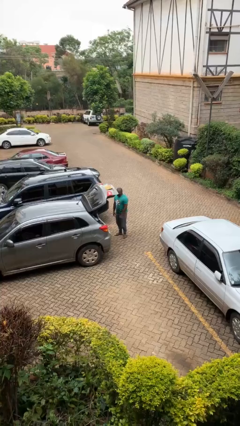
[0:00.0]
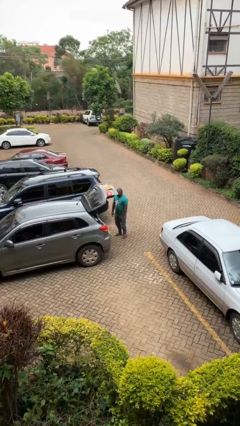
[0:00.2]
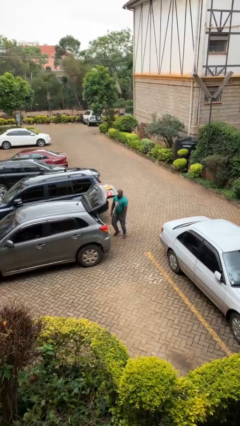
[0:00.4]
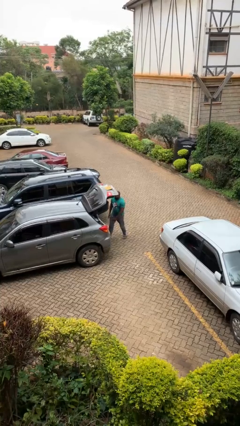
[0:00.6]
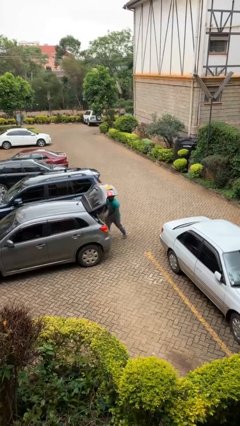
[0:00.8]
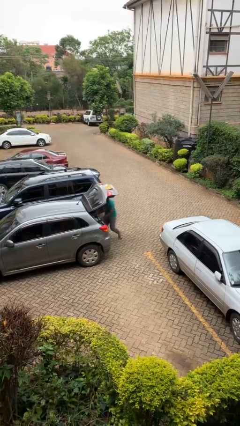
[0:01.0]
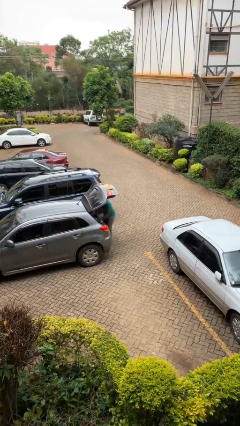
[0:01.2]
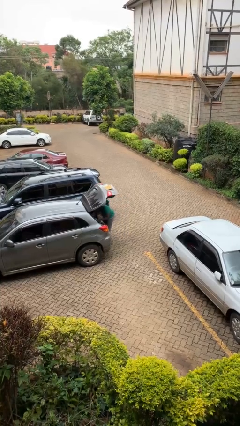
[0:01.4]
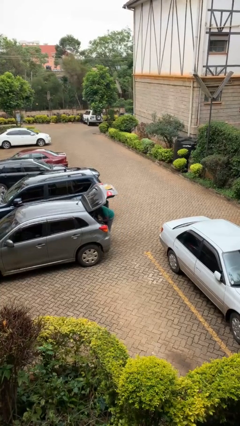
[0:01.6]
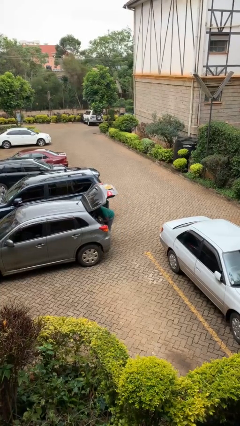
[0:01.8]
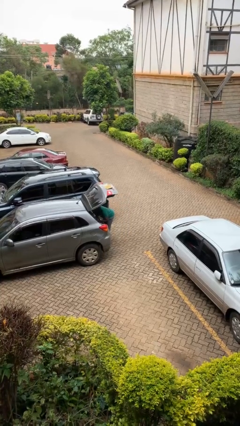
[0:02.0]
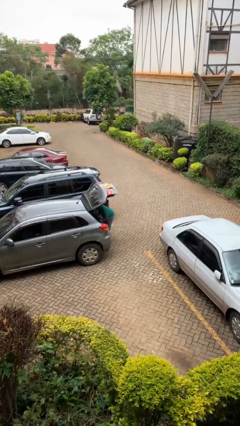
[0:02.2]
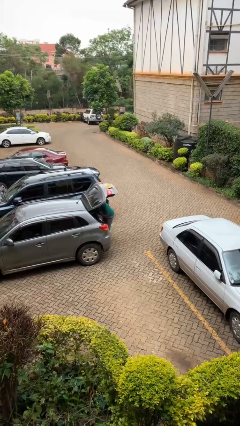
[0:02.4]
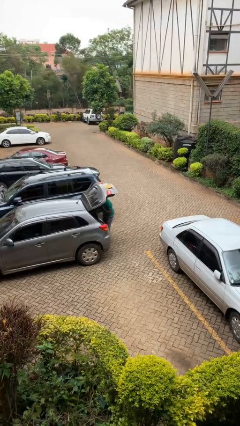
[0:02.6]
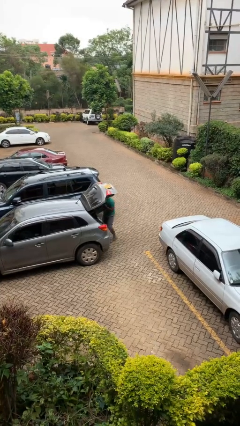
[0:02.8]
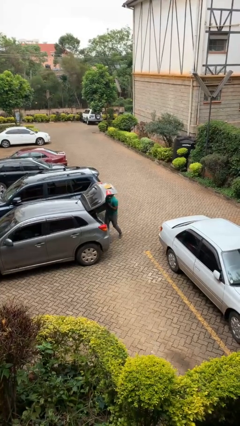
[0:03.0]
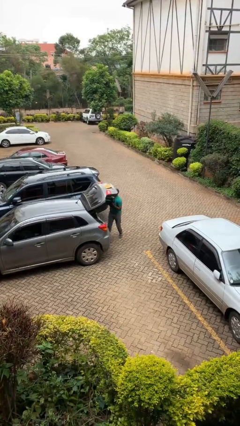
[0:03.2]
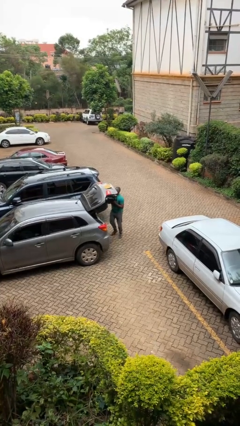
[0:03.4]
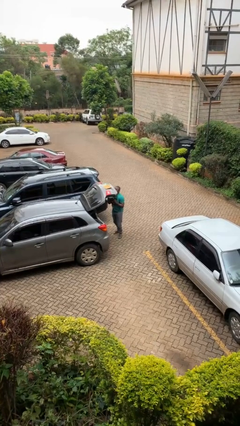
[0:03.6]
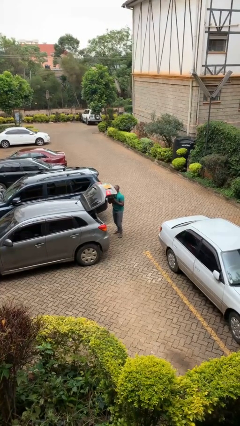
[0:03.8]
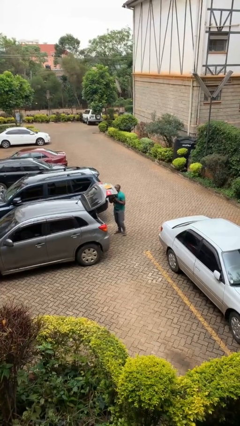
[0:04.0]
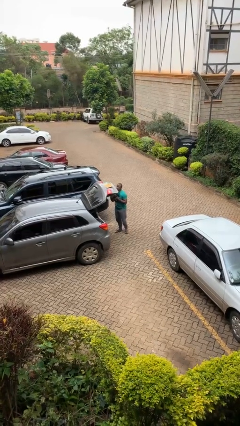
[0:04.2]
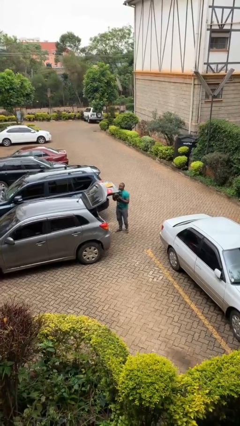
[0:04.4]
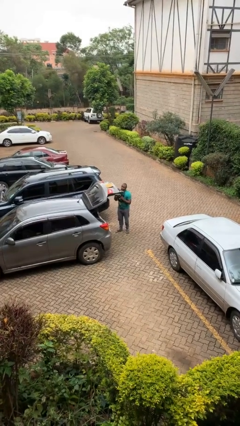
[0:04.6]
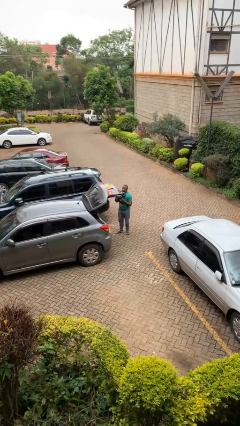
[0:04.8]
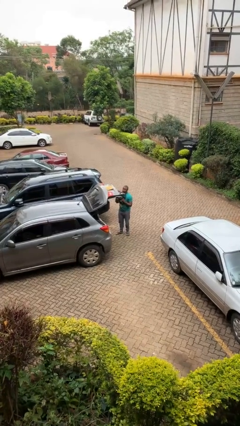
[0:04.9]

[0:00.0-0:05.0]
person unloads car

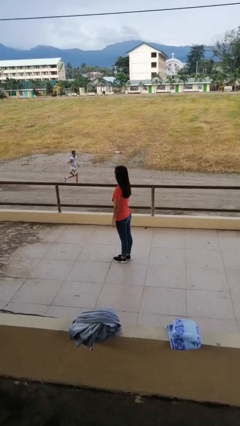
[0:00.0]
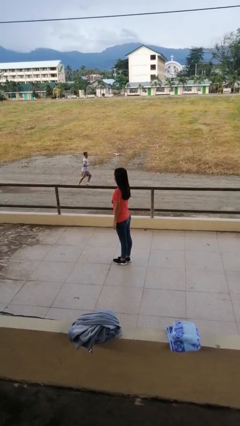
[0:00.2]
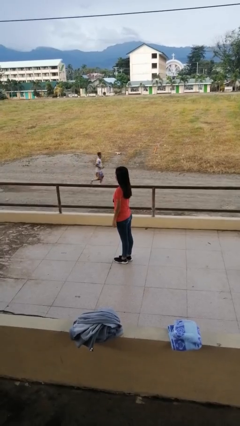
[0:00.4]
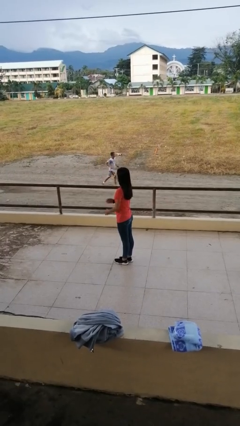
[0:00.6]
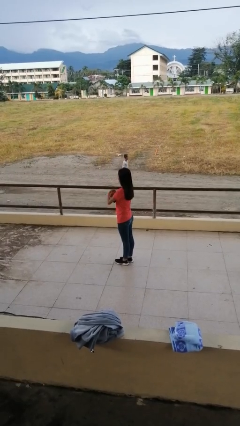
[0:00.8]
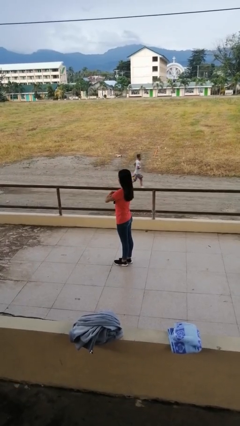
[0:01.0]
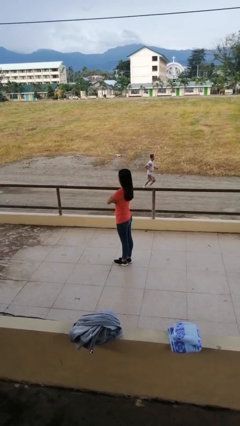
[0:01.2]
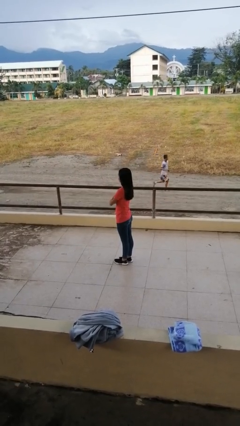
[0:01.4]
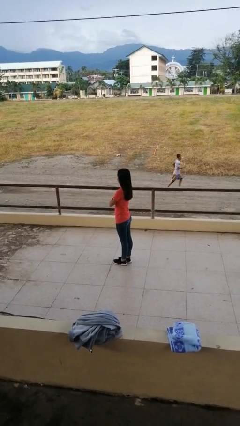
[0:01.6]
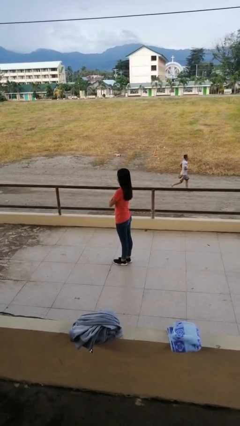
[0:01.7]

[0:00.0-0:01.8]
person crosses arms

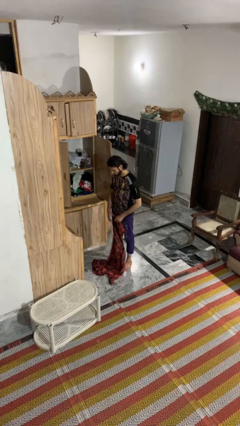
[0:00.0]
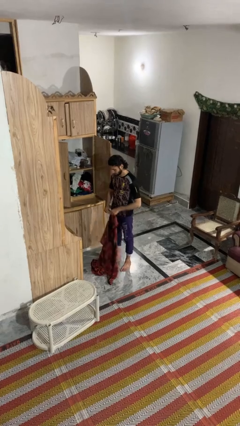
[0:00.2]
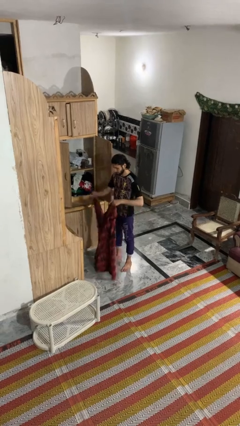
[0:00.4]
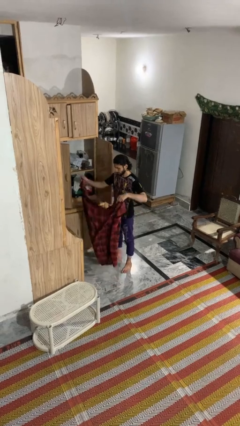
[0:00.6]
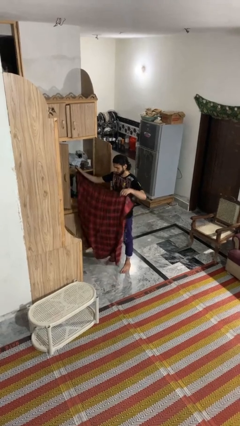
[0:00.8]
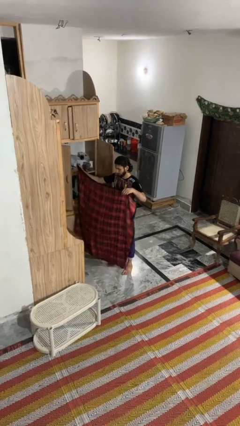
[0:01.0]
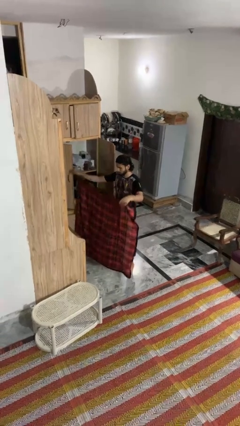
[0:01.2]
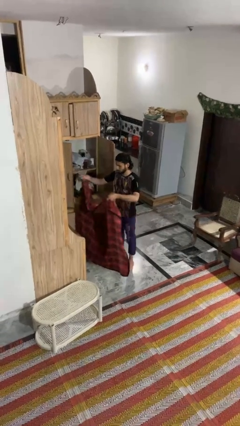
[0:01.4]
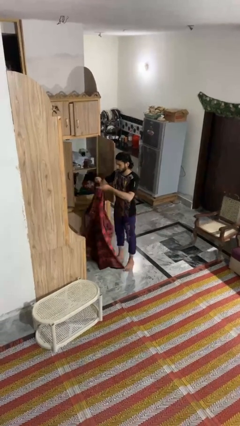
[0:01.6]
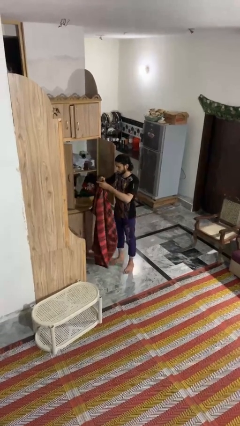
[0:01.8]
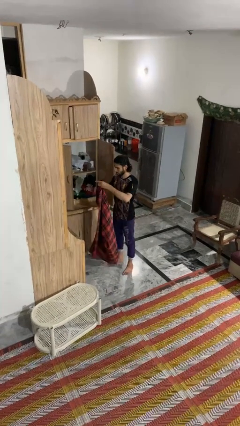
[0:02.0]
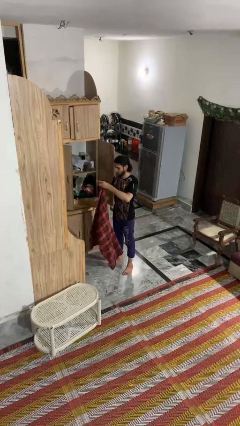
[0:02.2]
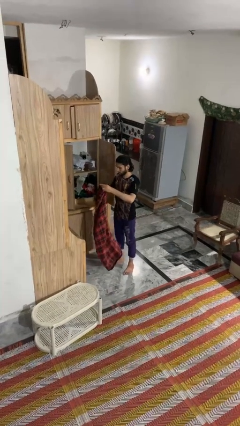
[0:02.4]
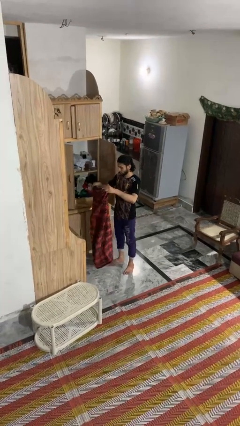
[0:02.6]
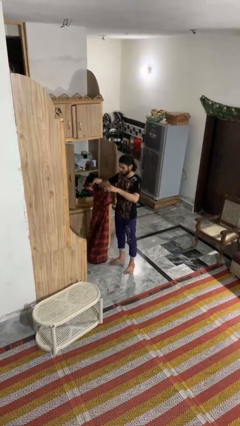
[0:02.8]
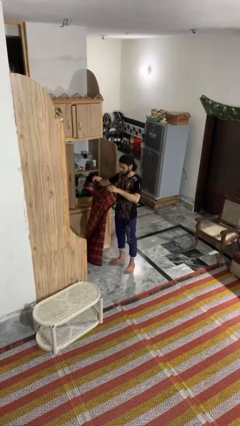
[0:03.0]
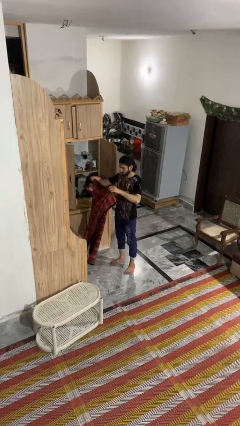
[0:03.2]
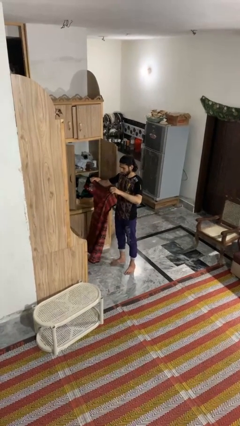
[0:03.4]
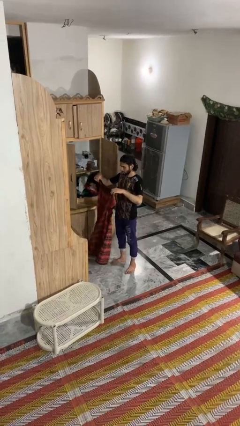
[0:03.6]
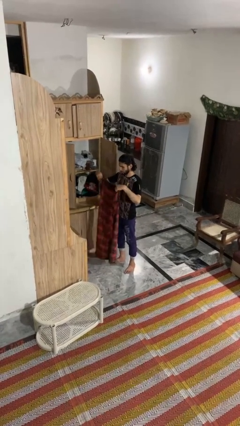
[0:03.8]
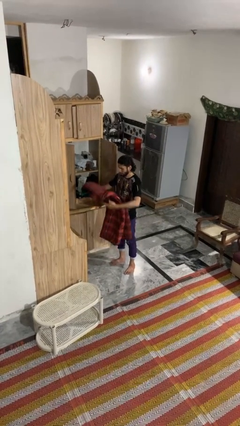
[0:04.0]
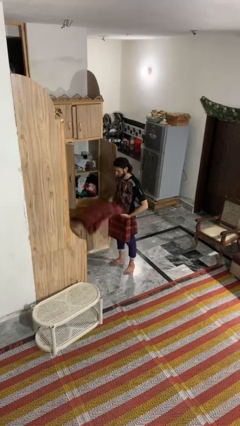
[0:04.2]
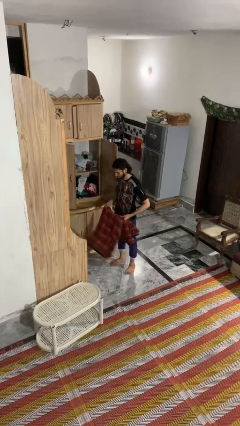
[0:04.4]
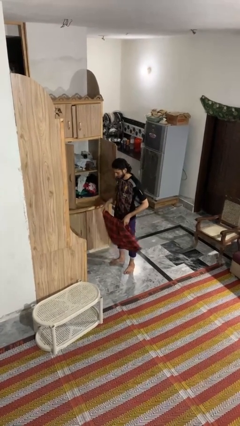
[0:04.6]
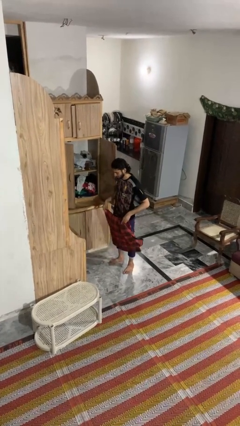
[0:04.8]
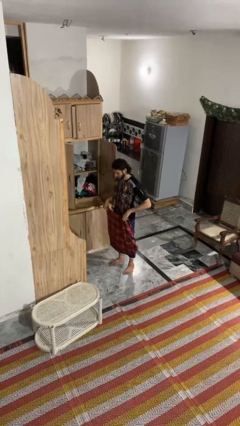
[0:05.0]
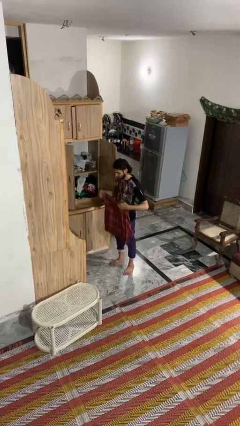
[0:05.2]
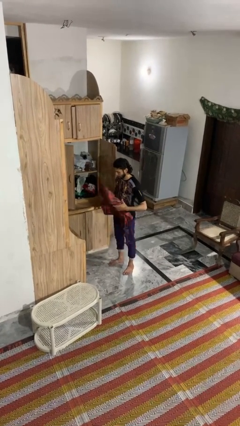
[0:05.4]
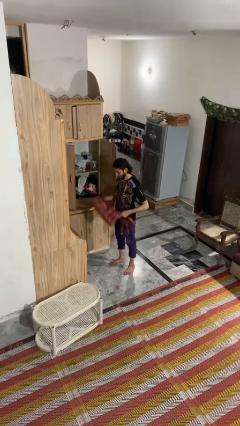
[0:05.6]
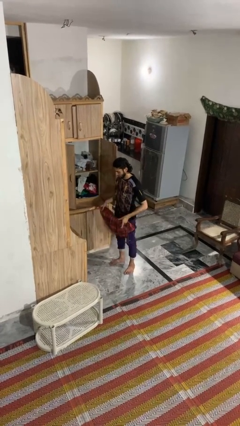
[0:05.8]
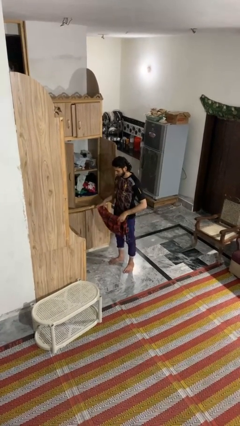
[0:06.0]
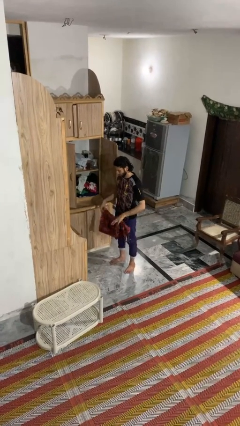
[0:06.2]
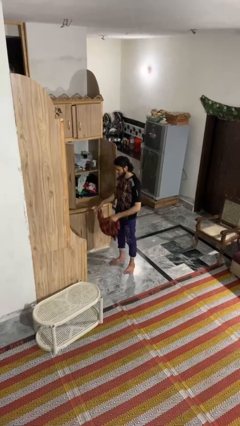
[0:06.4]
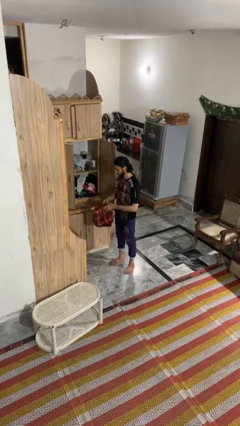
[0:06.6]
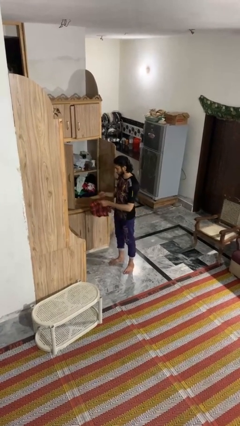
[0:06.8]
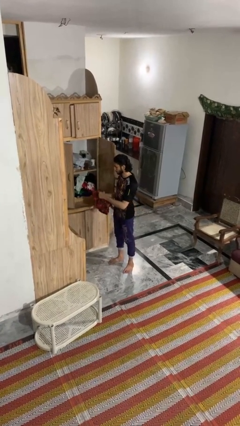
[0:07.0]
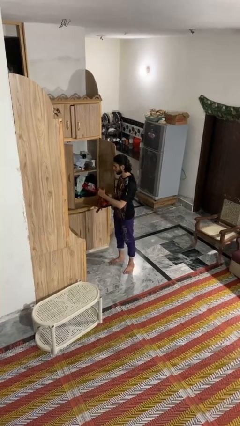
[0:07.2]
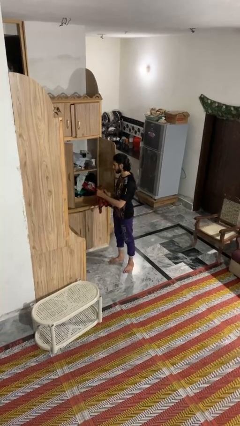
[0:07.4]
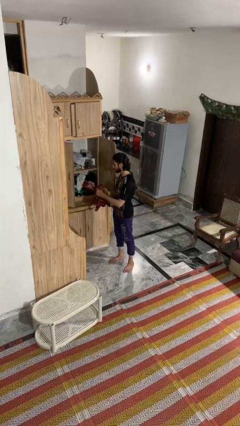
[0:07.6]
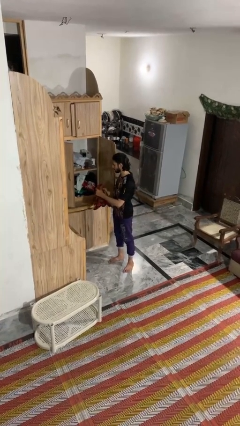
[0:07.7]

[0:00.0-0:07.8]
person folds blanket

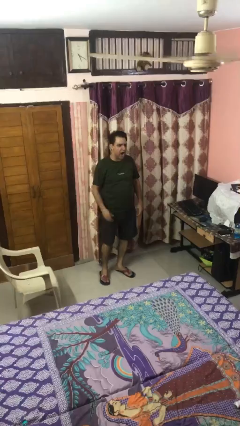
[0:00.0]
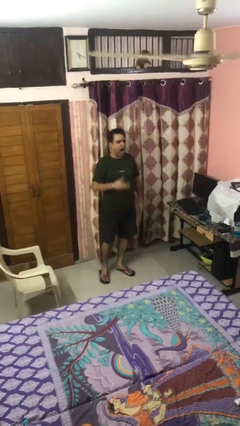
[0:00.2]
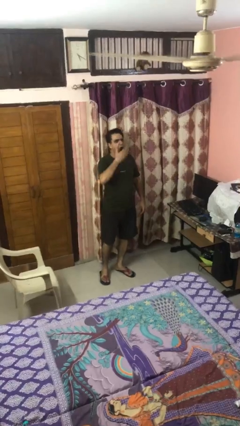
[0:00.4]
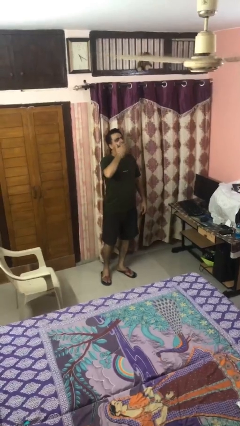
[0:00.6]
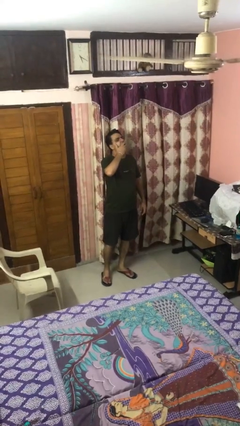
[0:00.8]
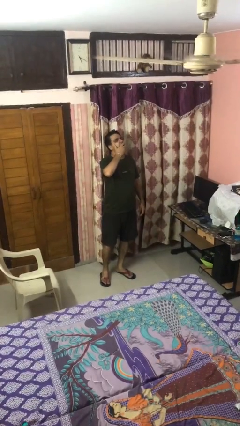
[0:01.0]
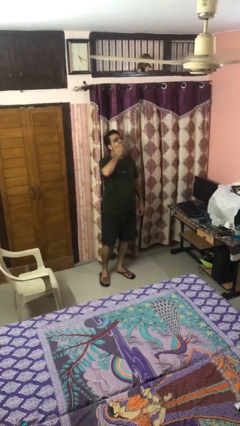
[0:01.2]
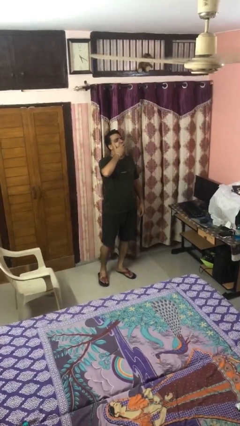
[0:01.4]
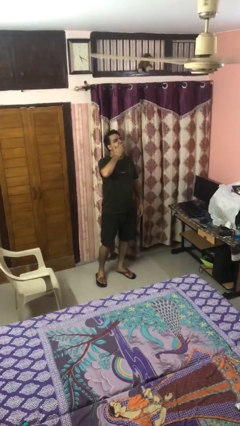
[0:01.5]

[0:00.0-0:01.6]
person yawns

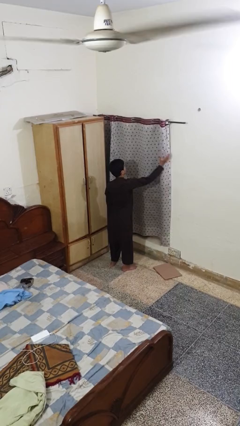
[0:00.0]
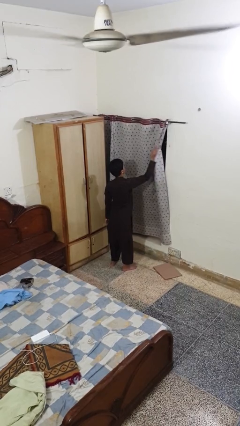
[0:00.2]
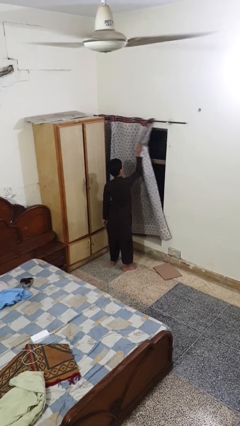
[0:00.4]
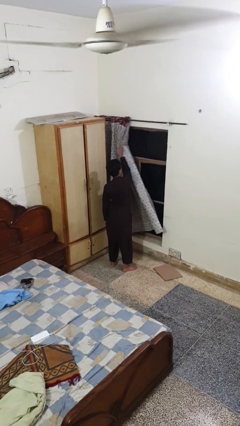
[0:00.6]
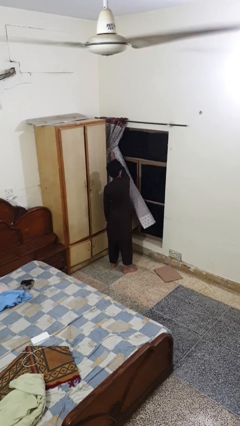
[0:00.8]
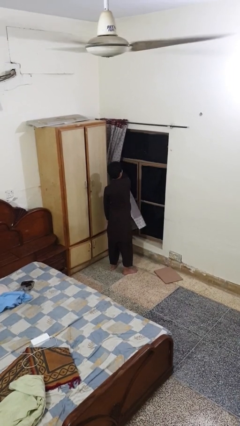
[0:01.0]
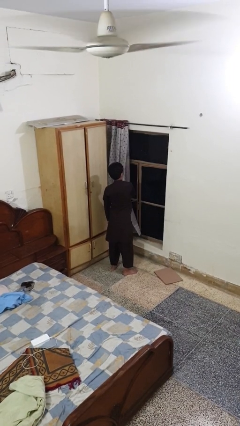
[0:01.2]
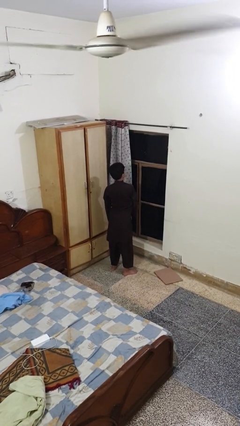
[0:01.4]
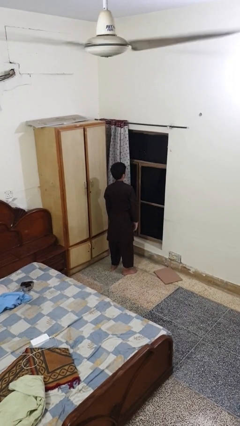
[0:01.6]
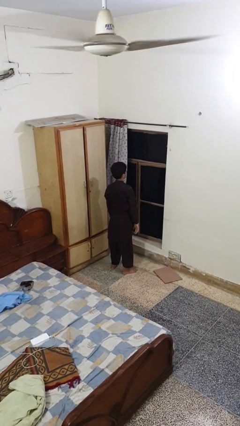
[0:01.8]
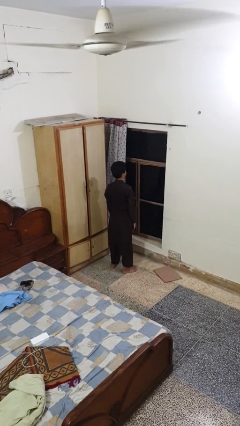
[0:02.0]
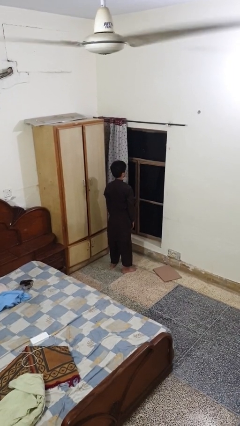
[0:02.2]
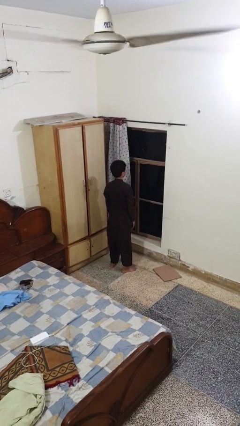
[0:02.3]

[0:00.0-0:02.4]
person opens curtains
